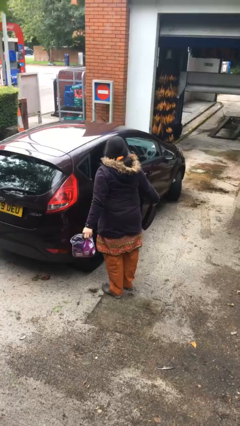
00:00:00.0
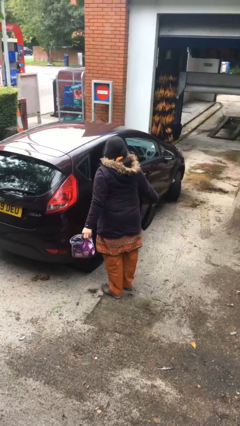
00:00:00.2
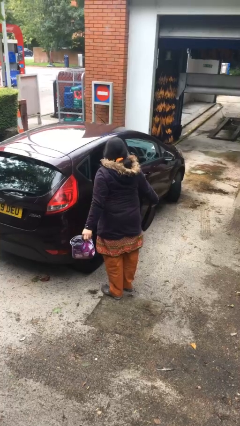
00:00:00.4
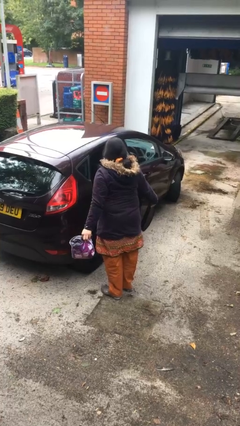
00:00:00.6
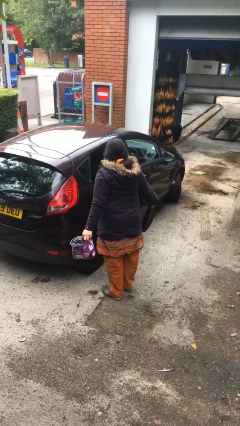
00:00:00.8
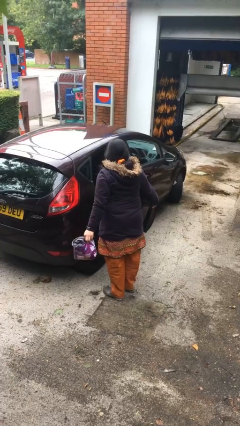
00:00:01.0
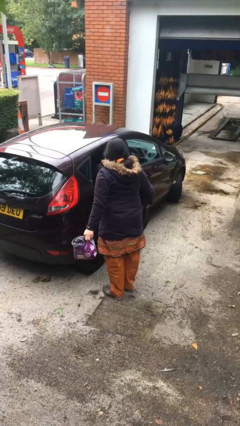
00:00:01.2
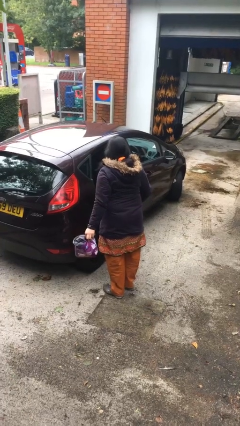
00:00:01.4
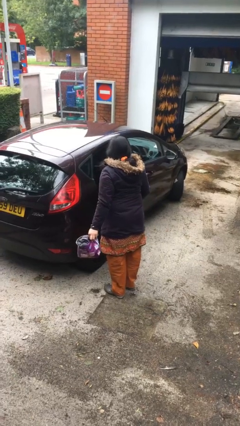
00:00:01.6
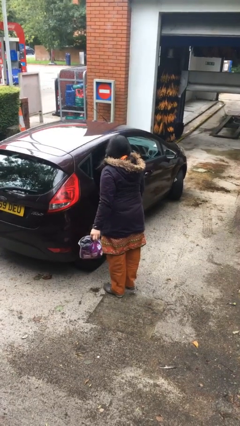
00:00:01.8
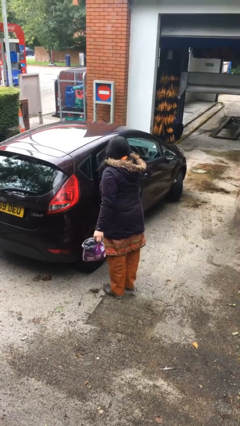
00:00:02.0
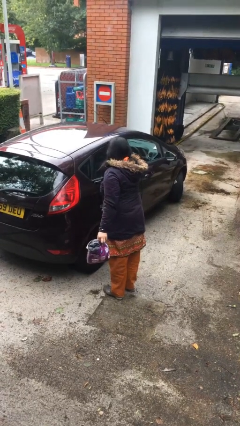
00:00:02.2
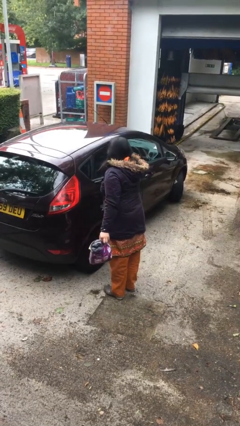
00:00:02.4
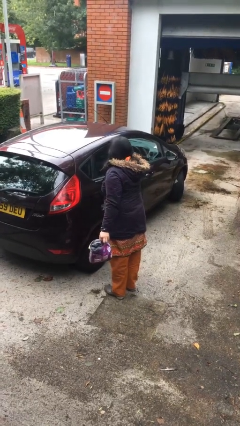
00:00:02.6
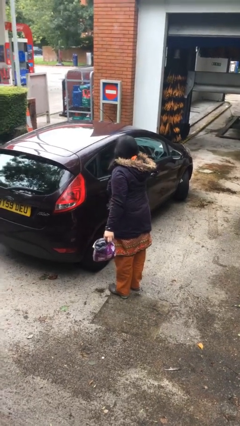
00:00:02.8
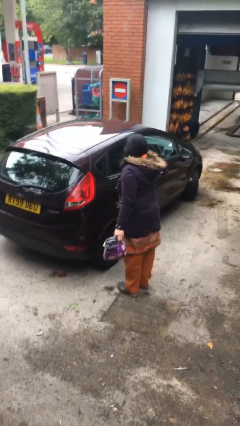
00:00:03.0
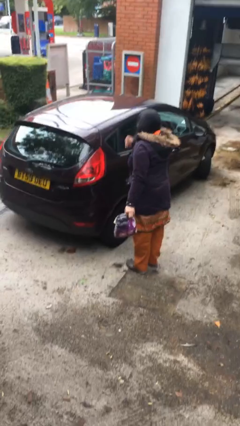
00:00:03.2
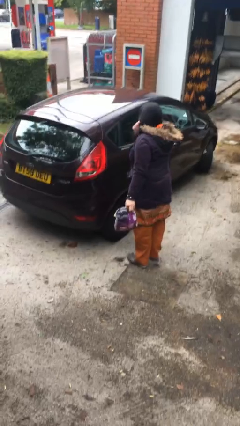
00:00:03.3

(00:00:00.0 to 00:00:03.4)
person closes car door

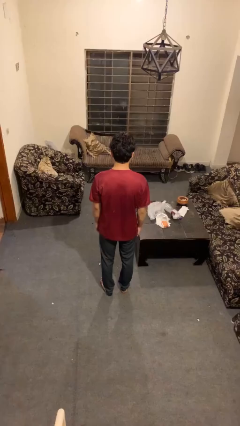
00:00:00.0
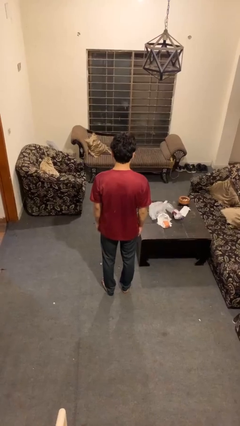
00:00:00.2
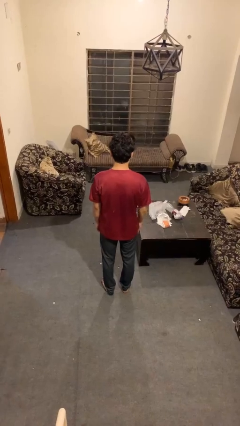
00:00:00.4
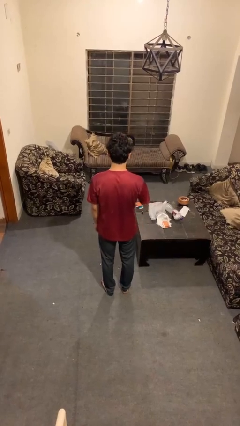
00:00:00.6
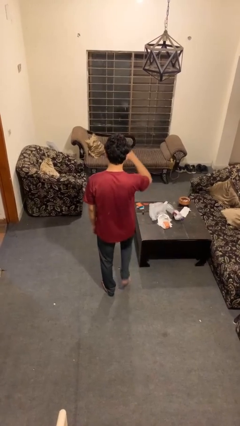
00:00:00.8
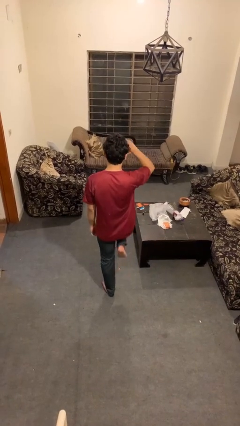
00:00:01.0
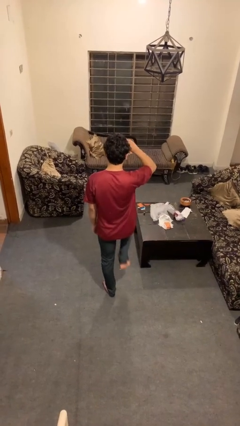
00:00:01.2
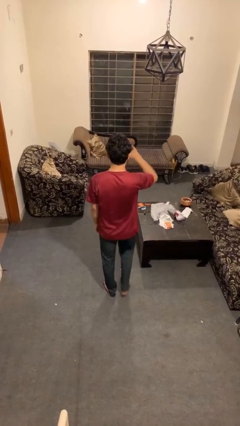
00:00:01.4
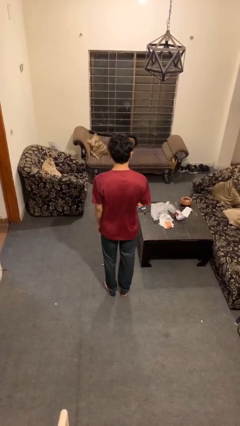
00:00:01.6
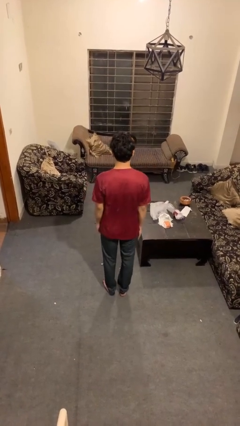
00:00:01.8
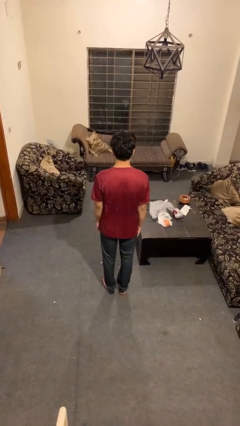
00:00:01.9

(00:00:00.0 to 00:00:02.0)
person salutes

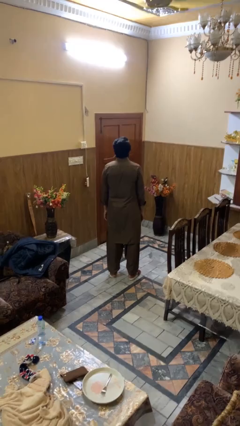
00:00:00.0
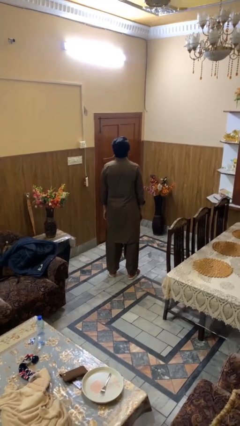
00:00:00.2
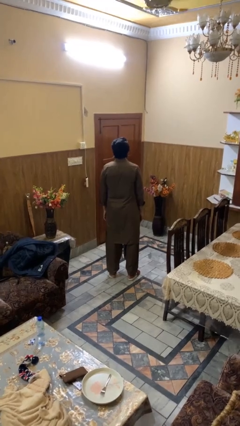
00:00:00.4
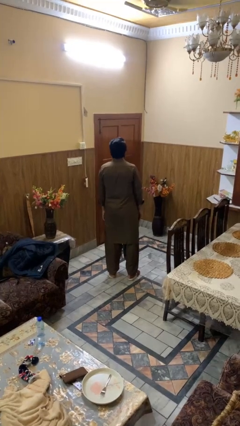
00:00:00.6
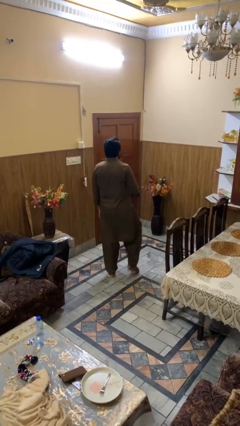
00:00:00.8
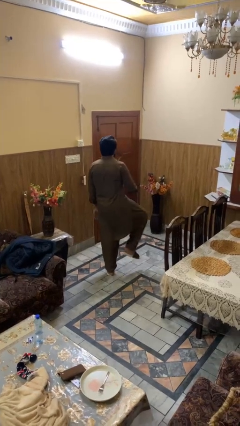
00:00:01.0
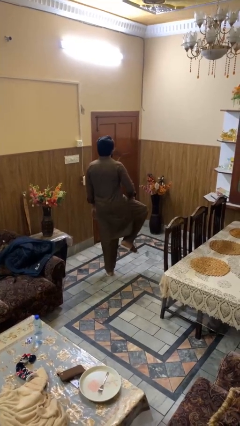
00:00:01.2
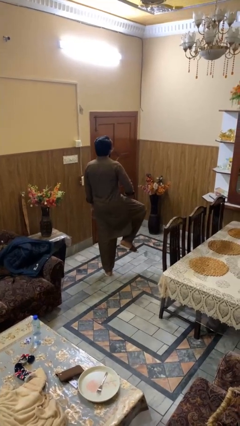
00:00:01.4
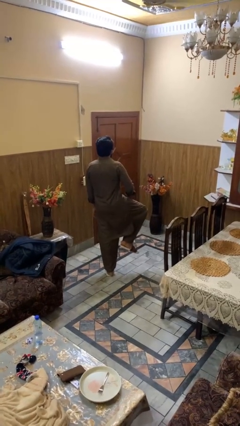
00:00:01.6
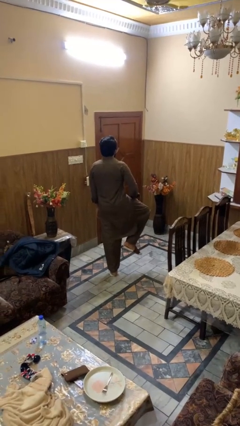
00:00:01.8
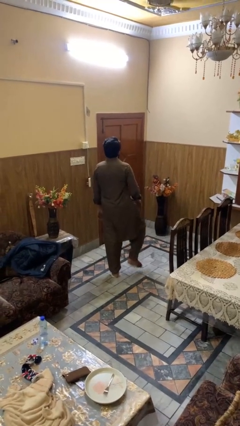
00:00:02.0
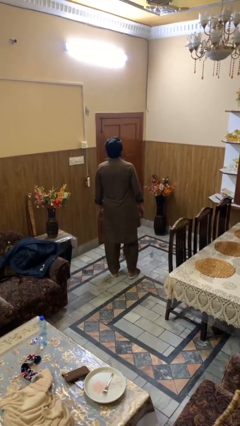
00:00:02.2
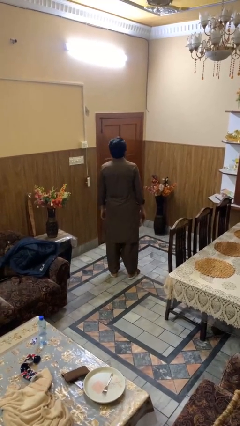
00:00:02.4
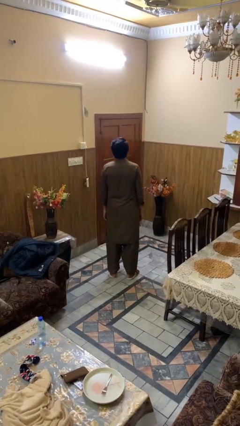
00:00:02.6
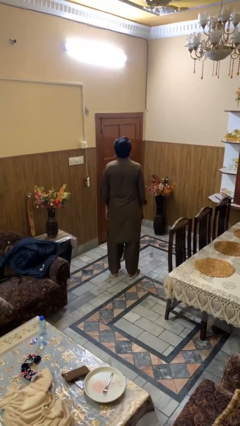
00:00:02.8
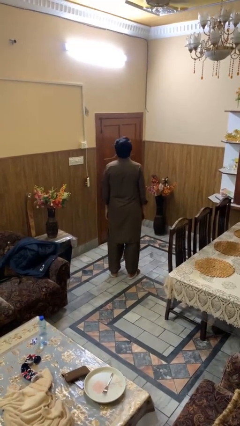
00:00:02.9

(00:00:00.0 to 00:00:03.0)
person slaps hands on thighs

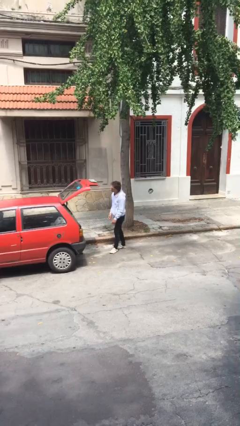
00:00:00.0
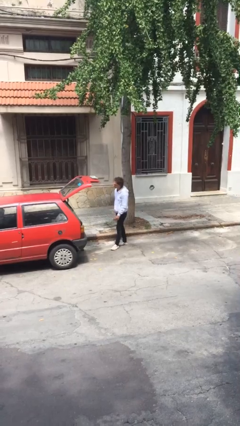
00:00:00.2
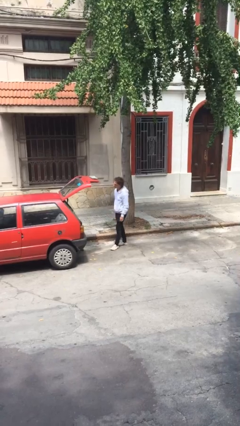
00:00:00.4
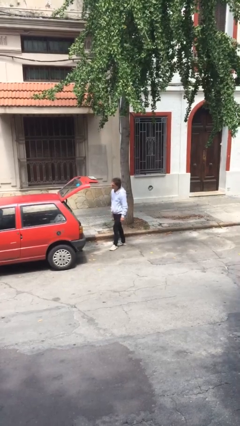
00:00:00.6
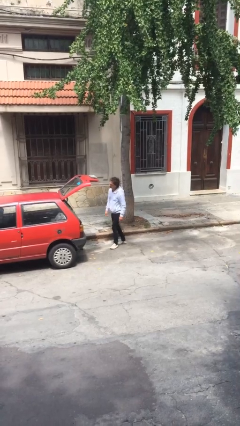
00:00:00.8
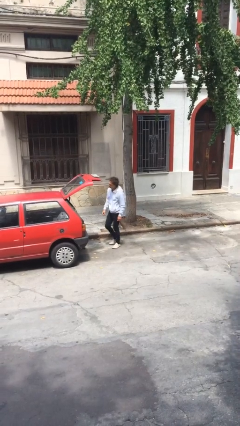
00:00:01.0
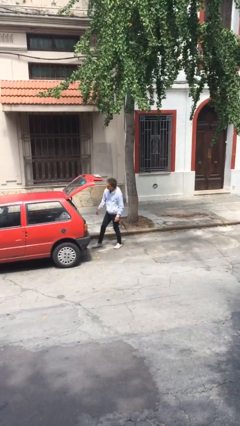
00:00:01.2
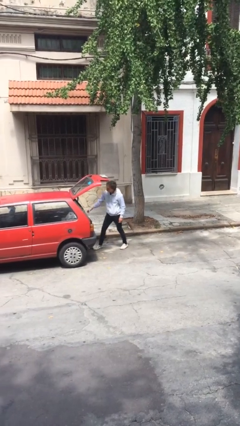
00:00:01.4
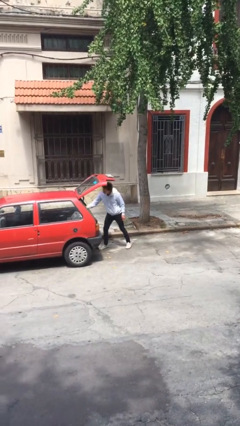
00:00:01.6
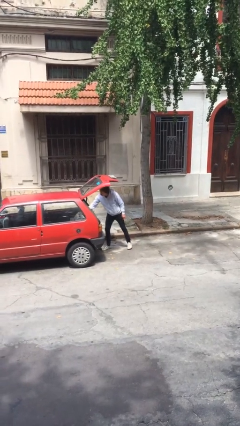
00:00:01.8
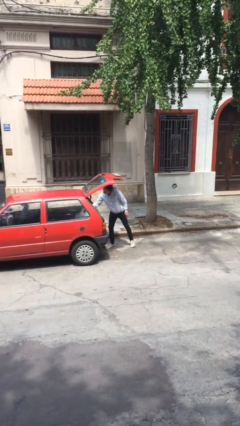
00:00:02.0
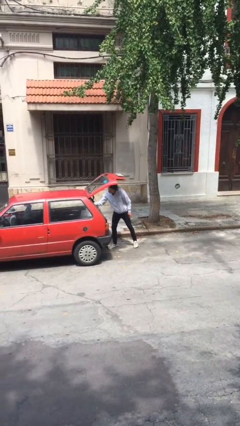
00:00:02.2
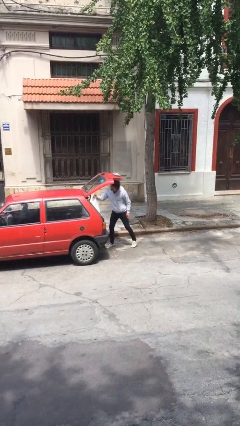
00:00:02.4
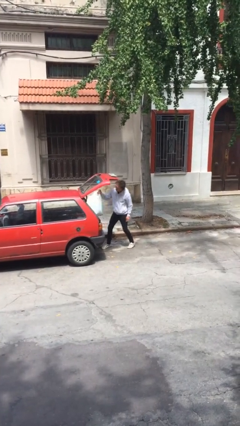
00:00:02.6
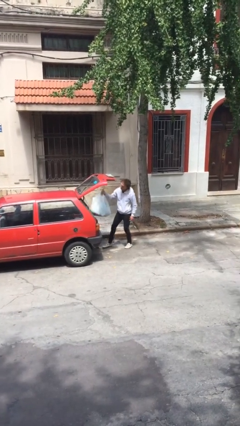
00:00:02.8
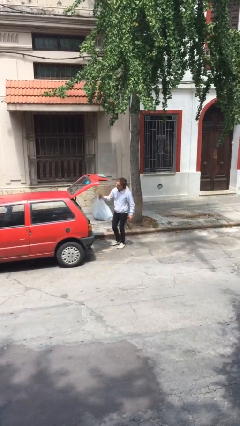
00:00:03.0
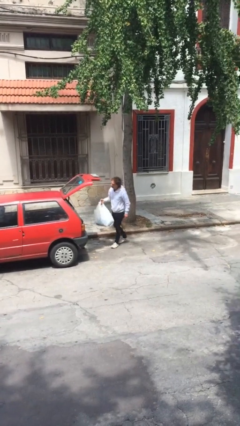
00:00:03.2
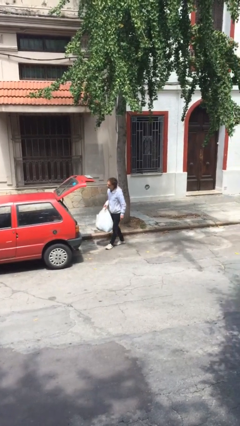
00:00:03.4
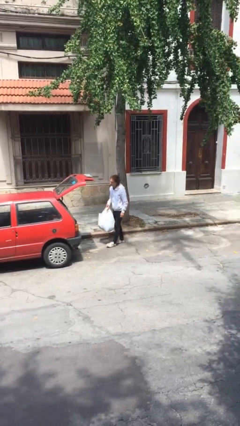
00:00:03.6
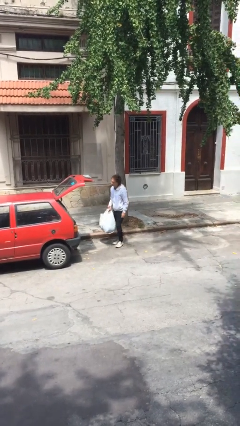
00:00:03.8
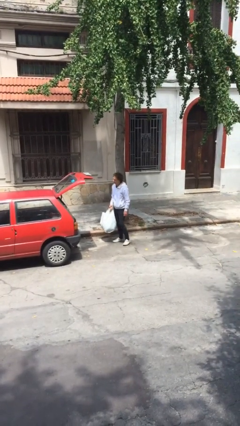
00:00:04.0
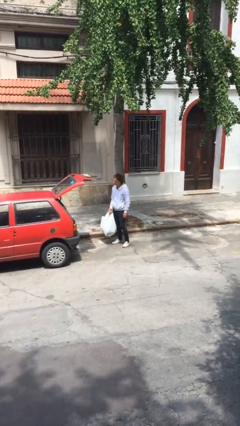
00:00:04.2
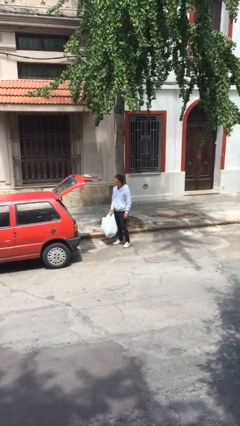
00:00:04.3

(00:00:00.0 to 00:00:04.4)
person unloads car

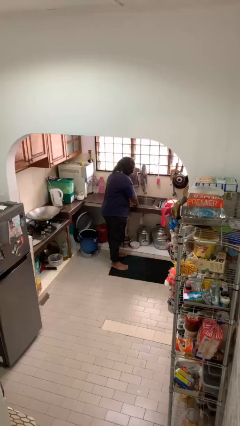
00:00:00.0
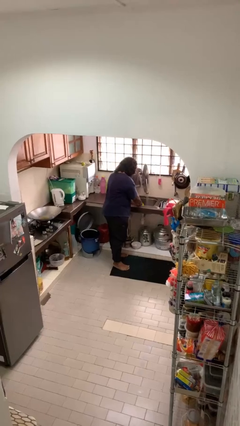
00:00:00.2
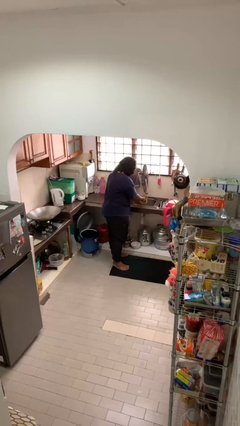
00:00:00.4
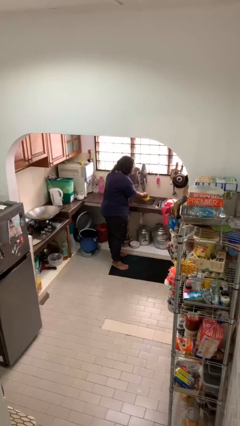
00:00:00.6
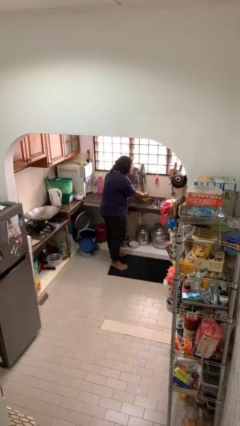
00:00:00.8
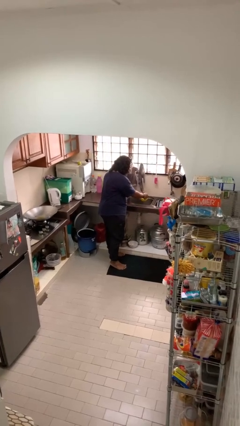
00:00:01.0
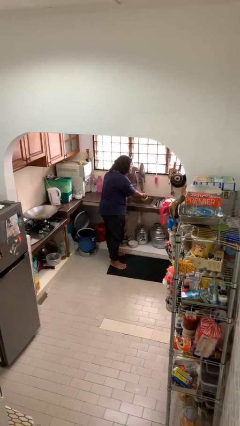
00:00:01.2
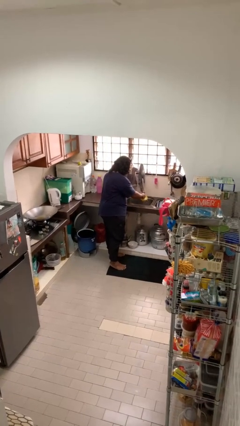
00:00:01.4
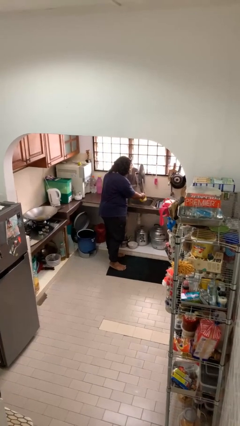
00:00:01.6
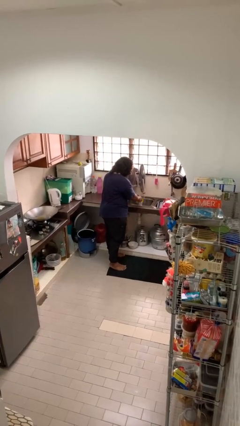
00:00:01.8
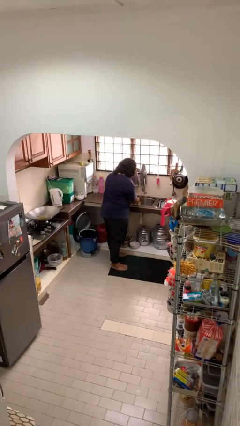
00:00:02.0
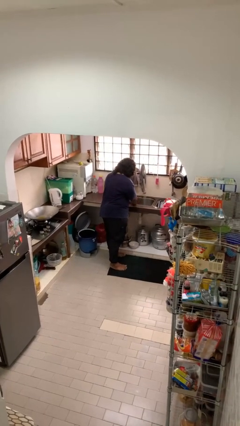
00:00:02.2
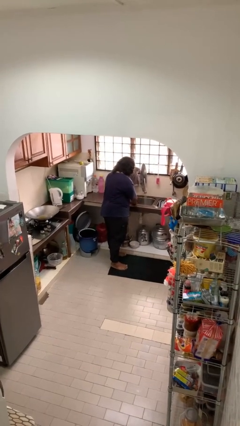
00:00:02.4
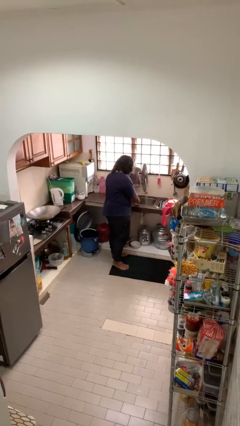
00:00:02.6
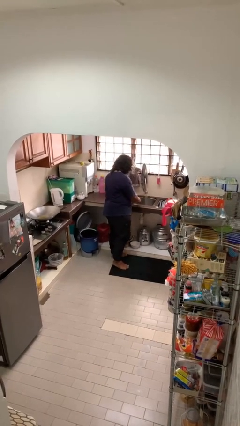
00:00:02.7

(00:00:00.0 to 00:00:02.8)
person washes dish

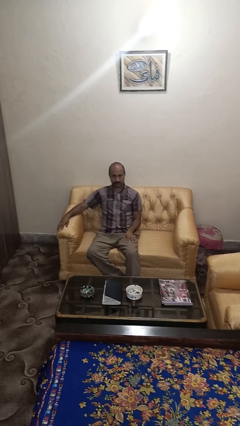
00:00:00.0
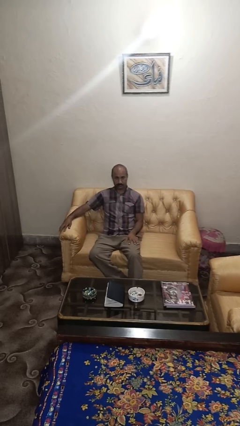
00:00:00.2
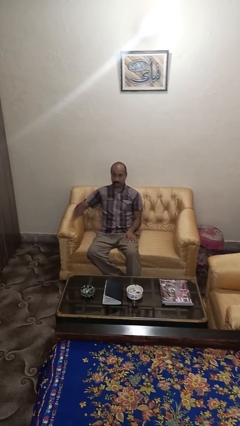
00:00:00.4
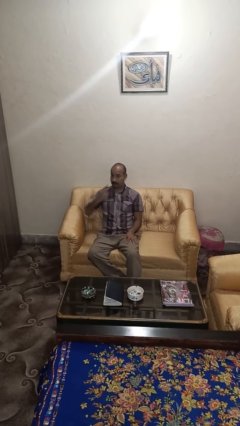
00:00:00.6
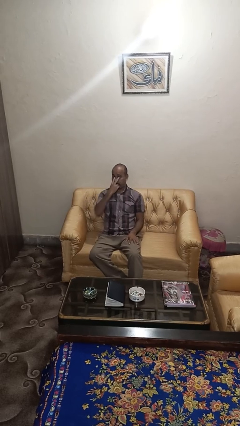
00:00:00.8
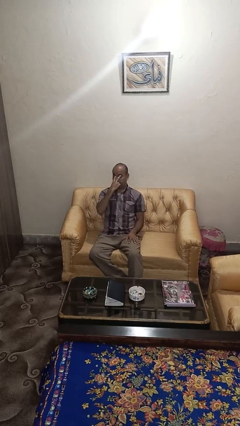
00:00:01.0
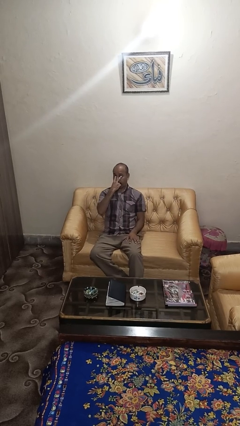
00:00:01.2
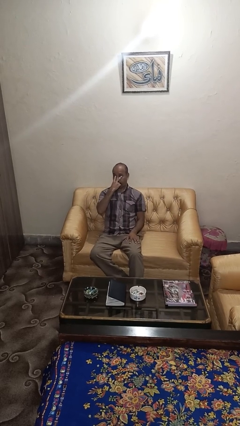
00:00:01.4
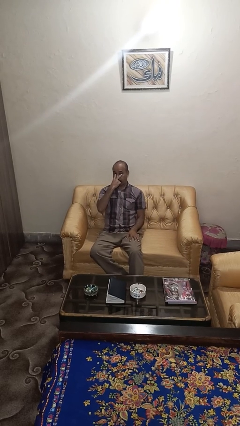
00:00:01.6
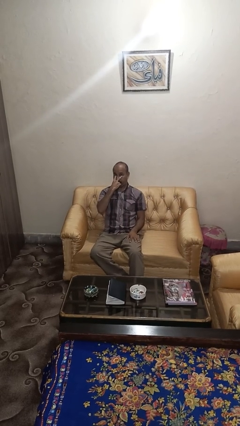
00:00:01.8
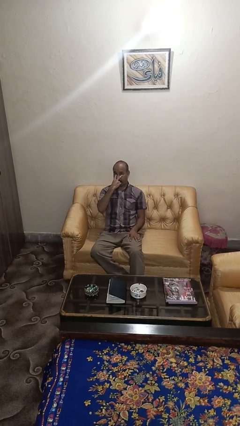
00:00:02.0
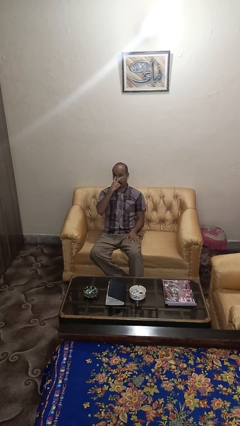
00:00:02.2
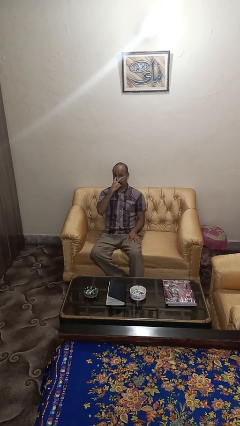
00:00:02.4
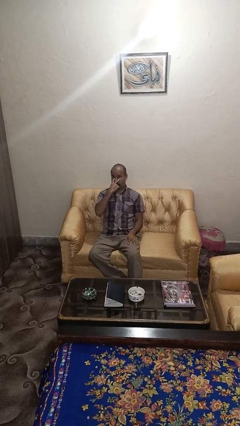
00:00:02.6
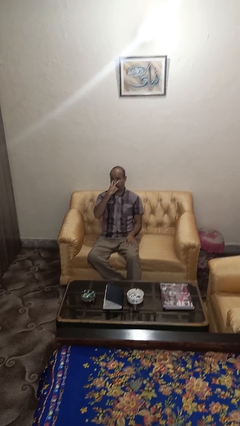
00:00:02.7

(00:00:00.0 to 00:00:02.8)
person gestures watch closely
